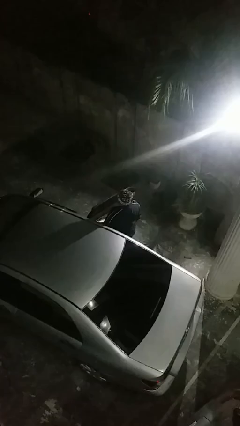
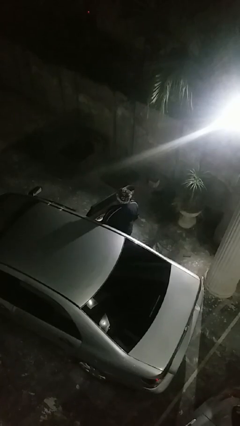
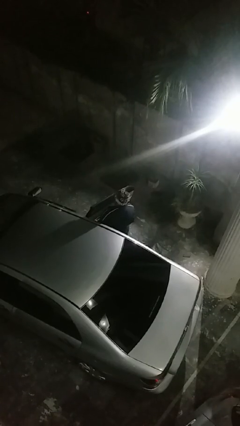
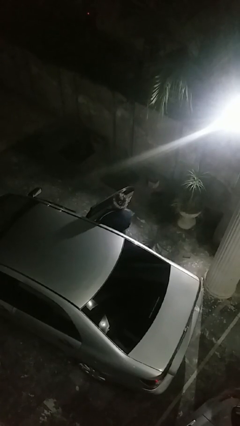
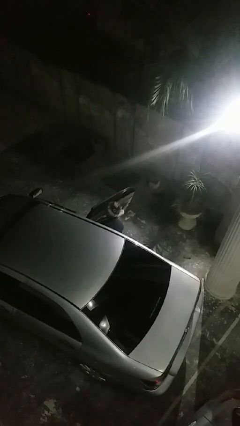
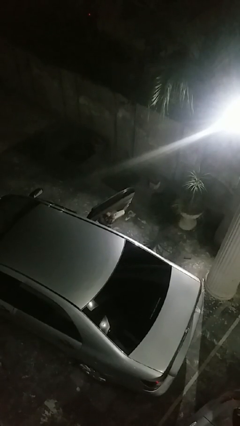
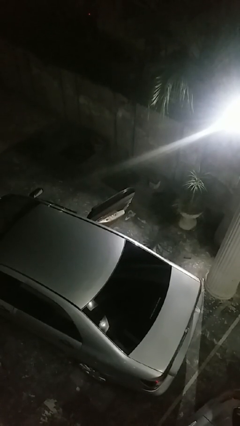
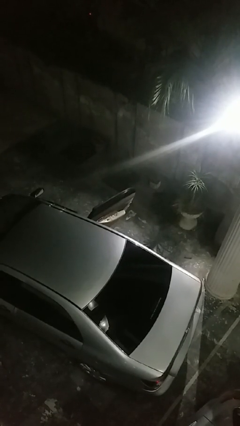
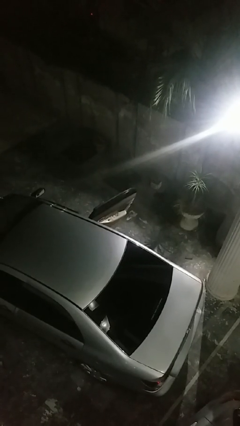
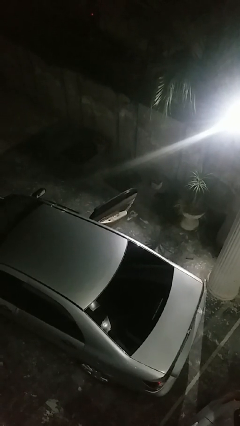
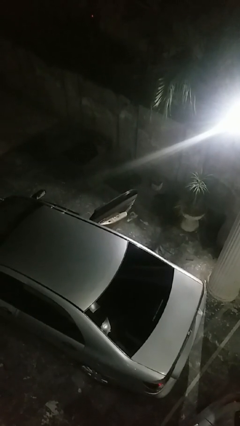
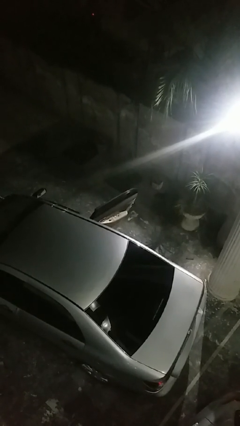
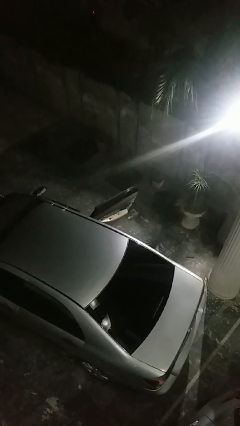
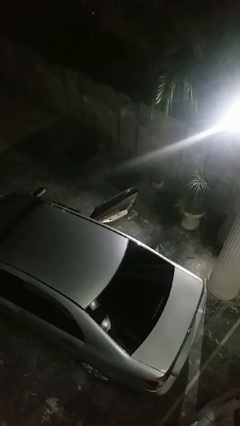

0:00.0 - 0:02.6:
person enters car

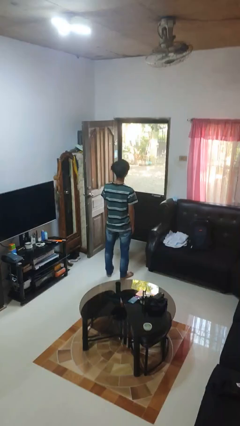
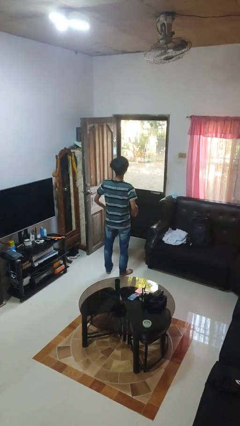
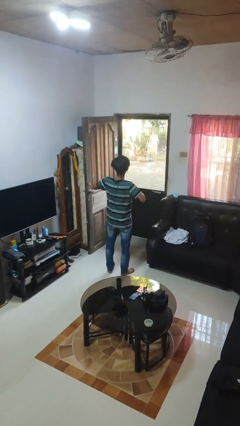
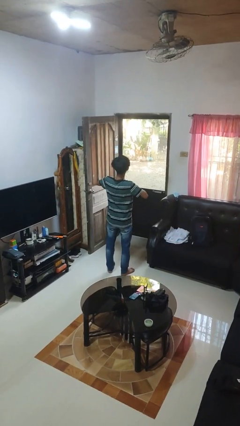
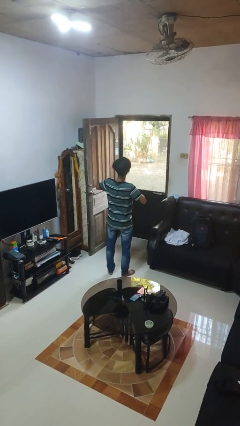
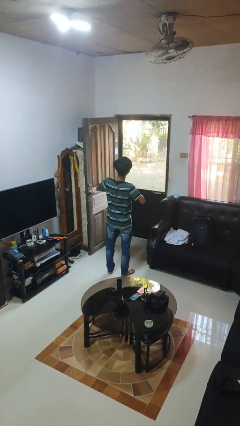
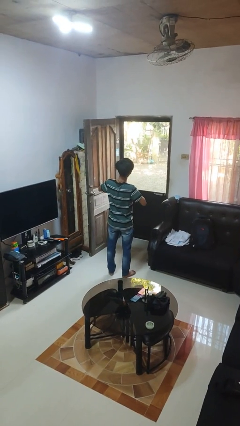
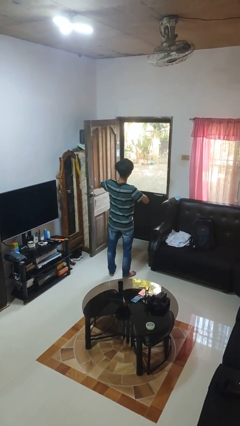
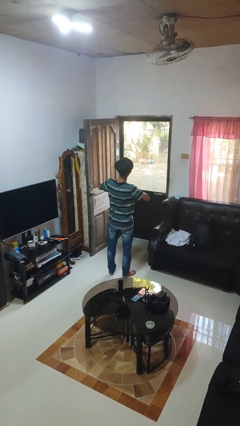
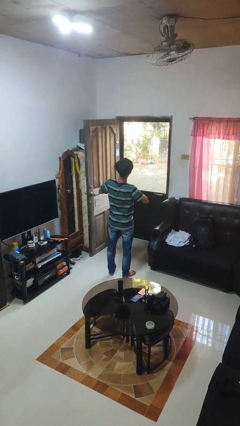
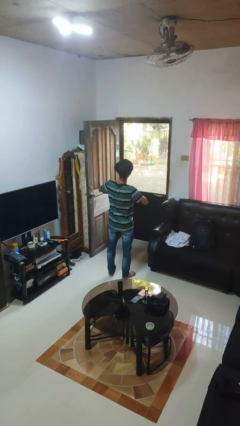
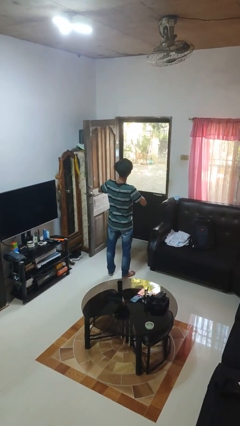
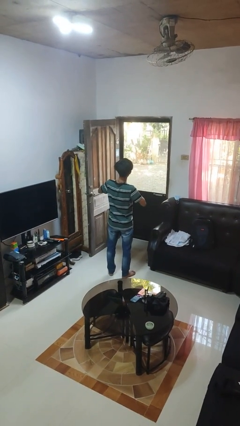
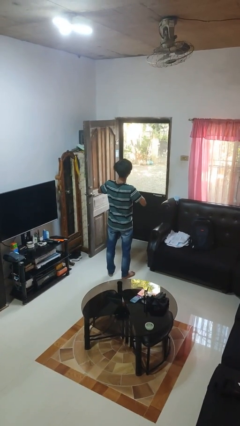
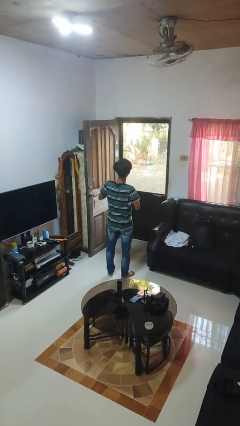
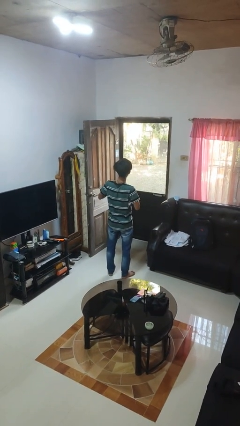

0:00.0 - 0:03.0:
person unbuttons shirt

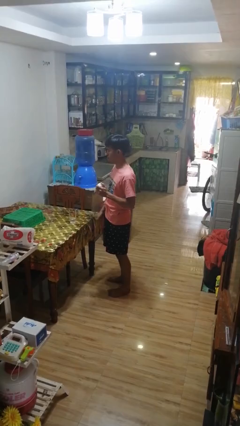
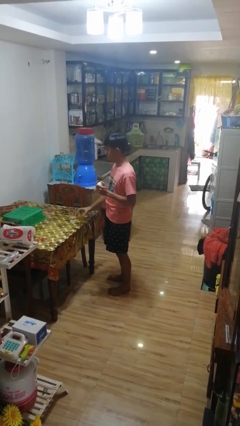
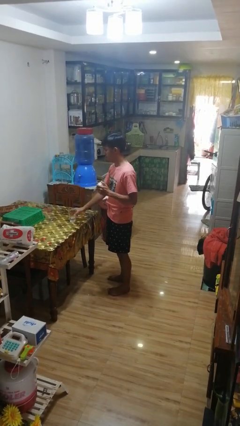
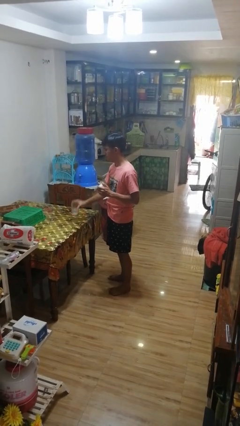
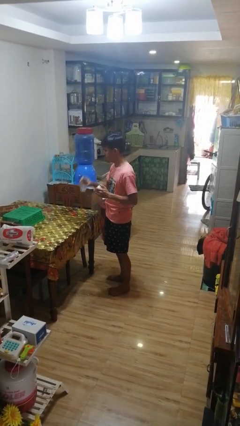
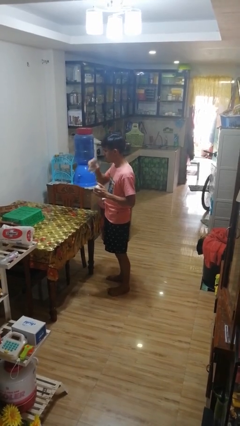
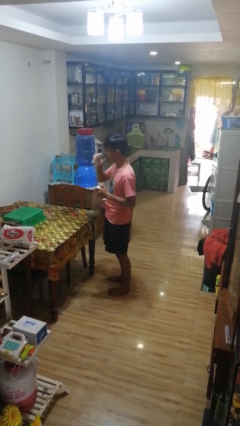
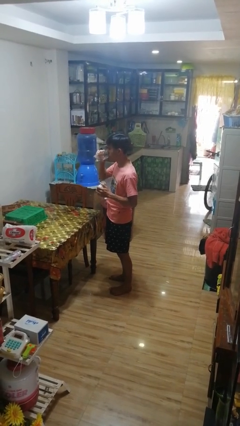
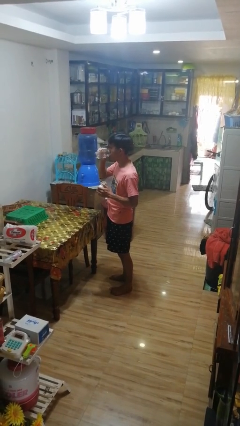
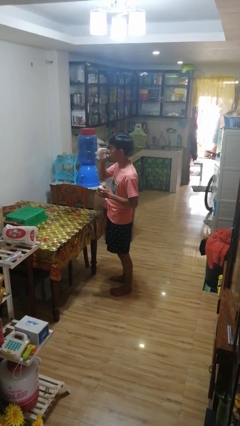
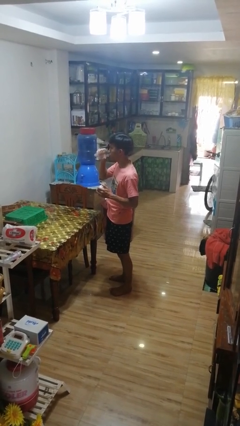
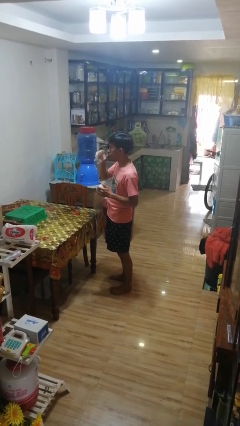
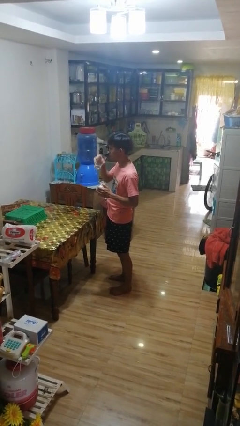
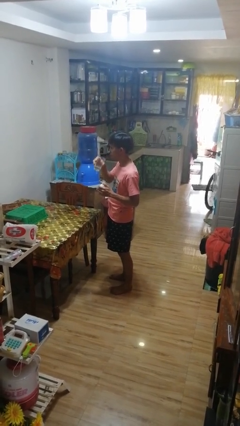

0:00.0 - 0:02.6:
person drinks from cup

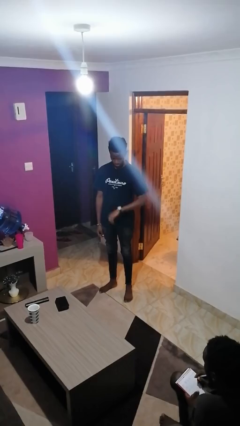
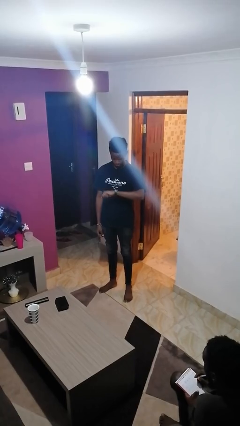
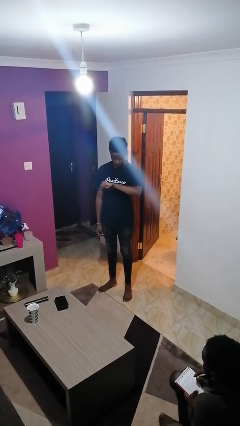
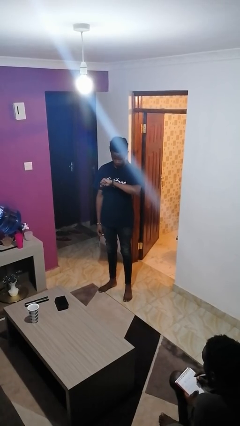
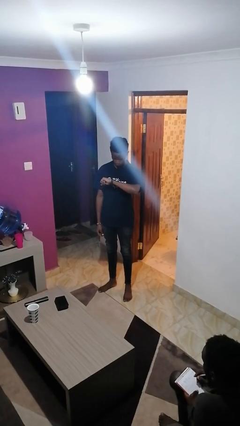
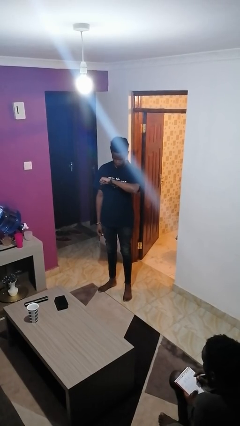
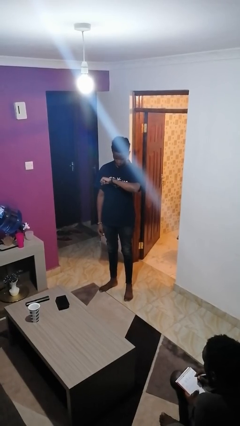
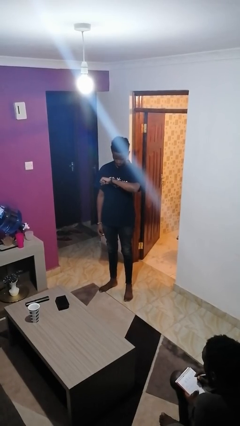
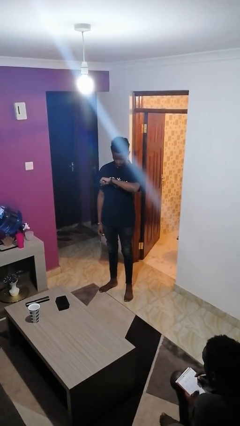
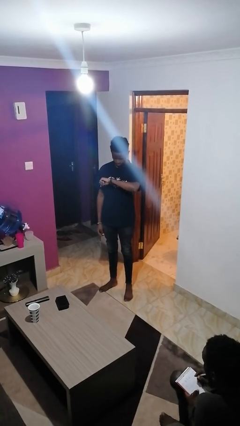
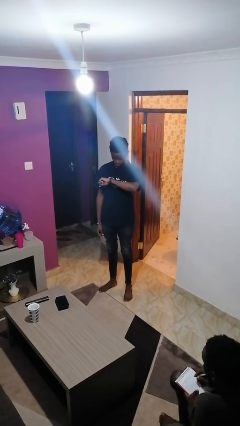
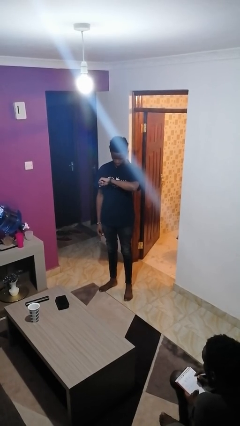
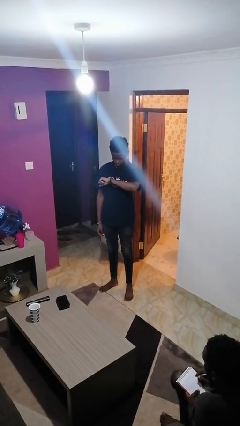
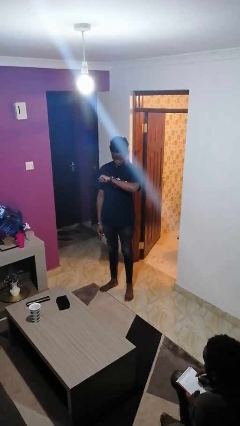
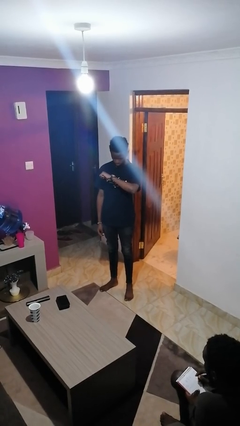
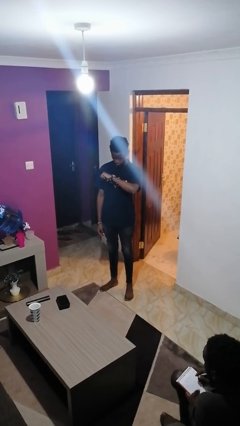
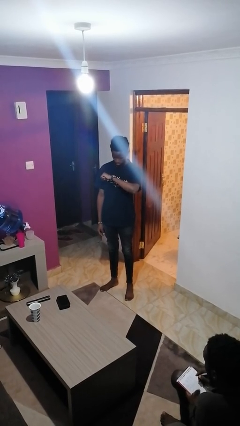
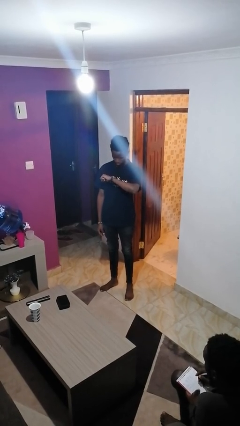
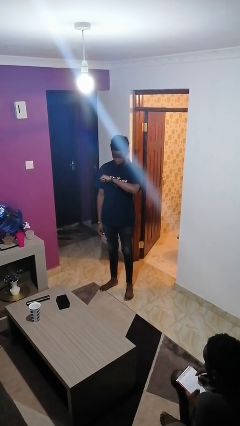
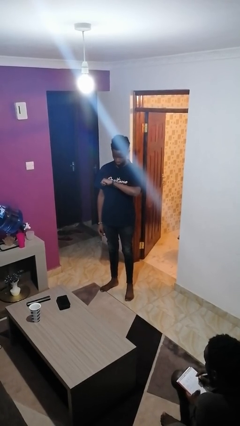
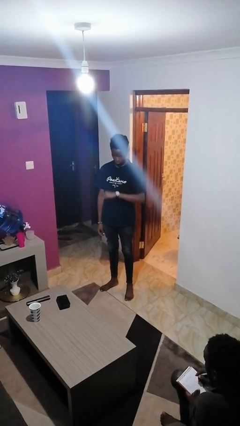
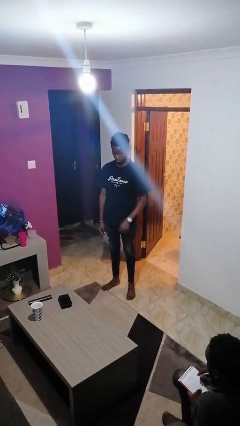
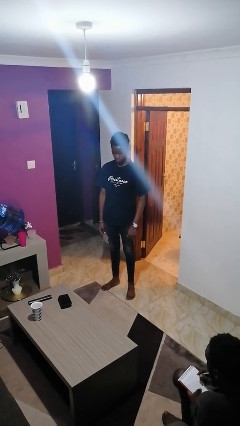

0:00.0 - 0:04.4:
person looks at wristwatch

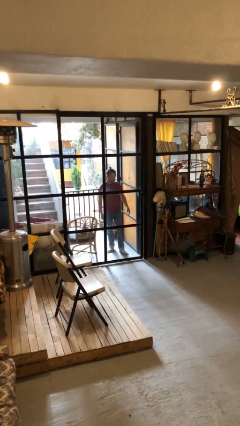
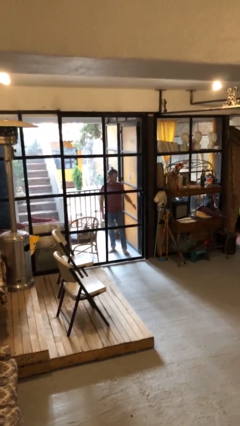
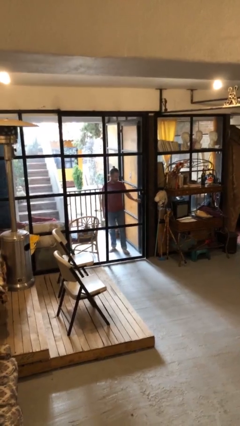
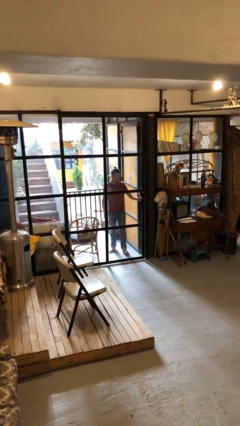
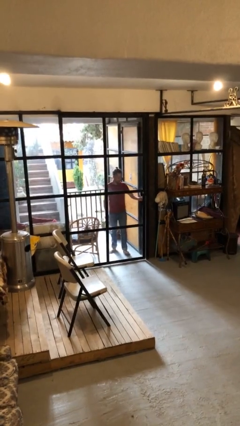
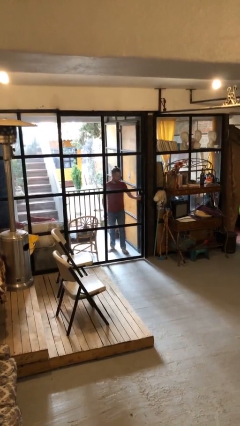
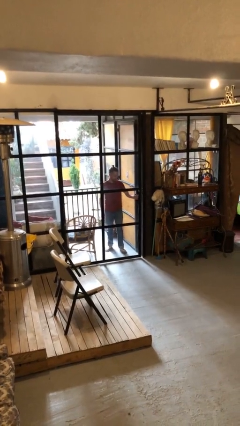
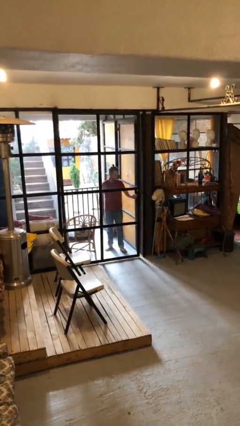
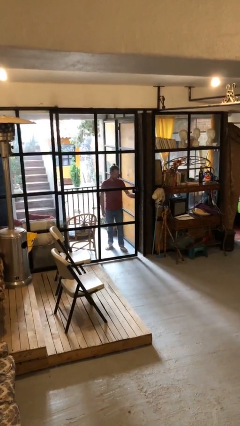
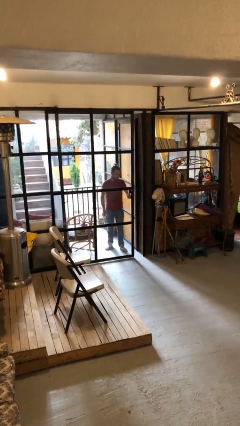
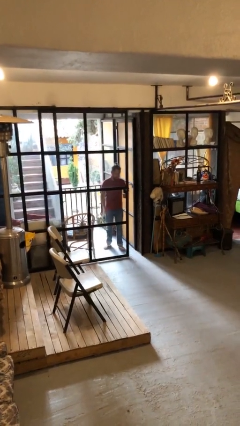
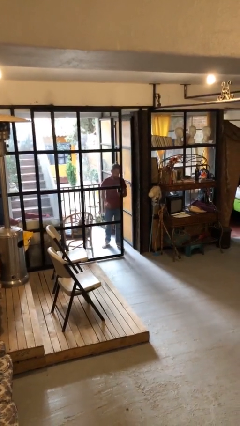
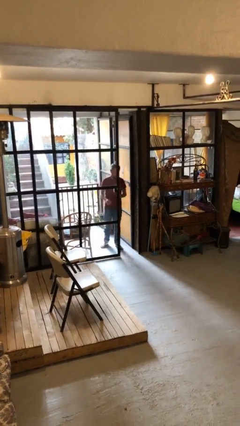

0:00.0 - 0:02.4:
person opens facility door

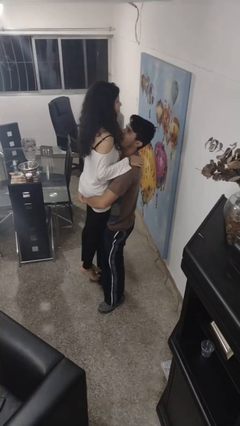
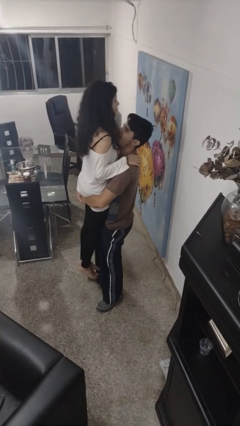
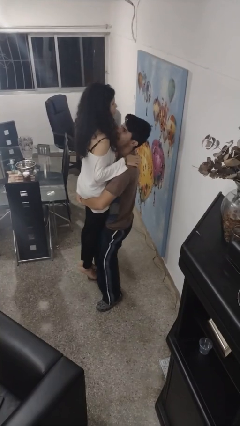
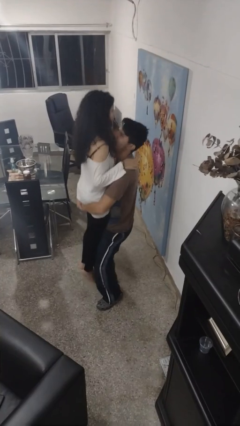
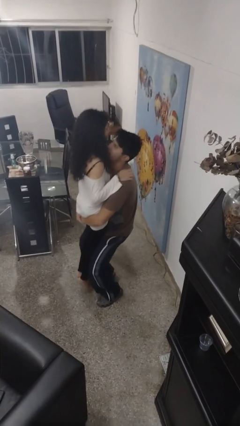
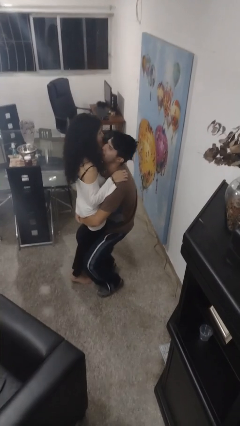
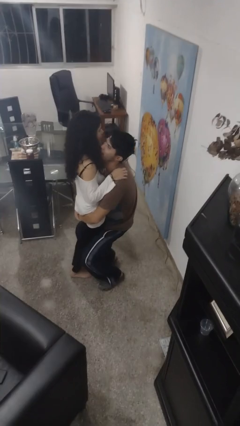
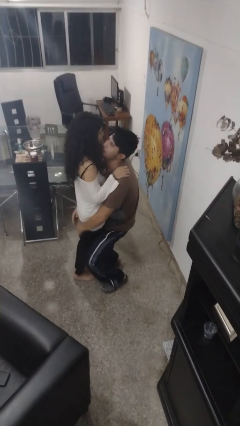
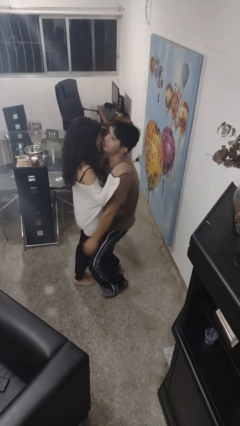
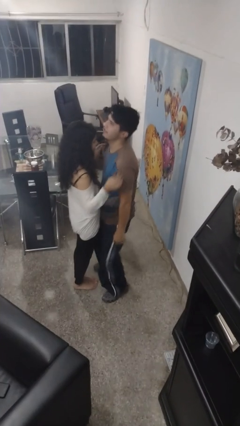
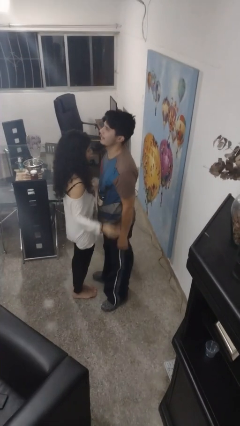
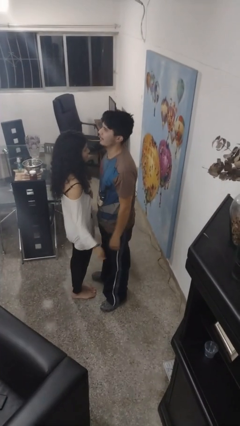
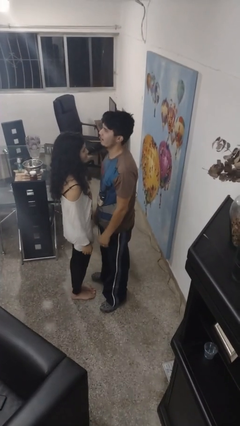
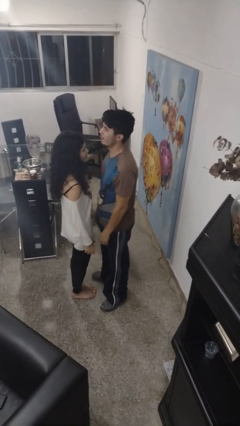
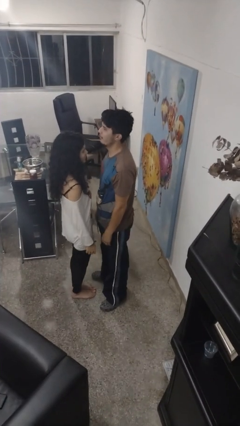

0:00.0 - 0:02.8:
person puts down person
